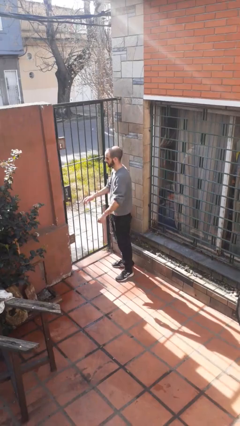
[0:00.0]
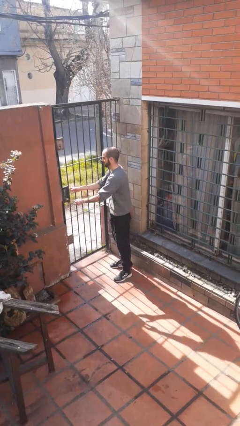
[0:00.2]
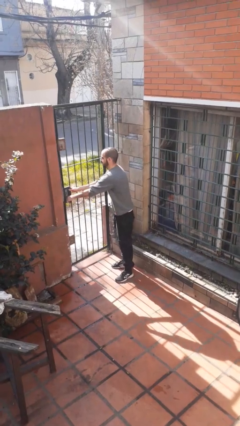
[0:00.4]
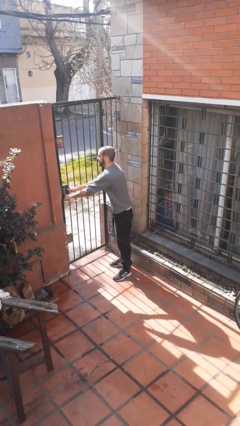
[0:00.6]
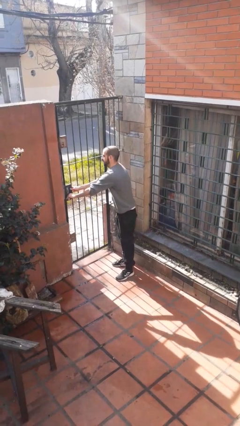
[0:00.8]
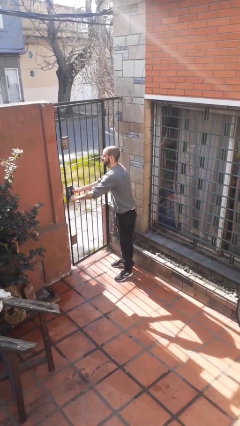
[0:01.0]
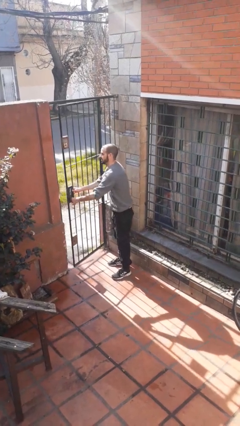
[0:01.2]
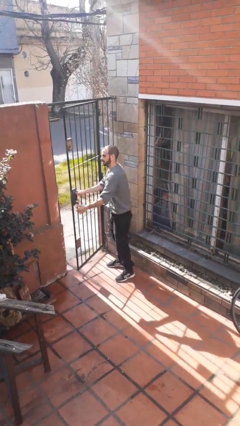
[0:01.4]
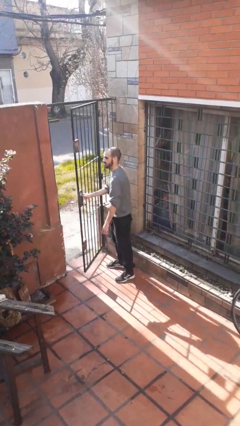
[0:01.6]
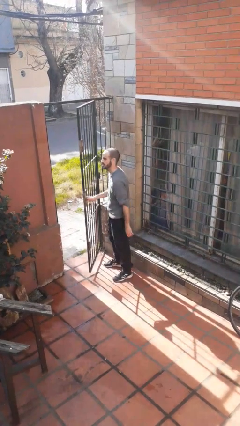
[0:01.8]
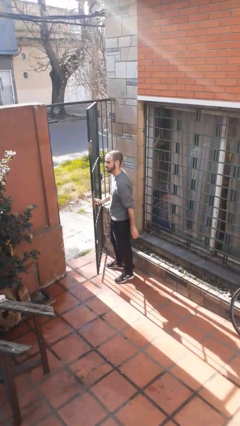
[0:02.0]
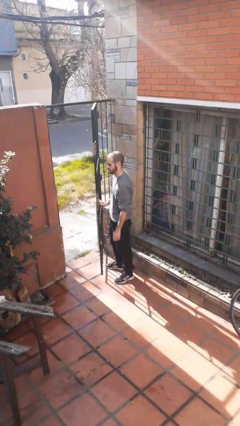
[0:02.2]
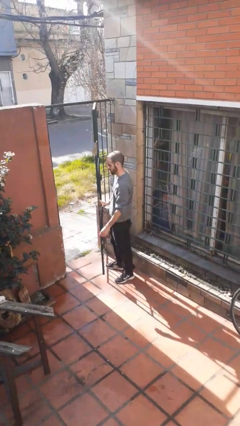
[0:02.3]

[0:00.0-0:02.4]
person opens gate

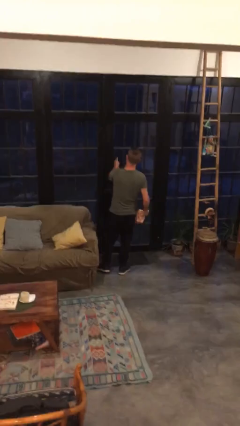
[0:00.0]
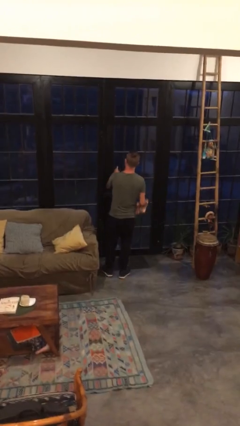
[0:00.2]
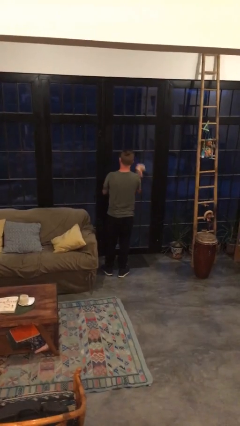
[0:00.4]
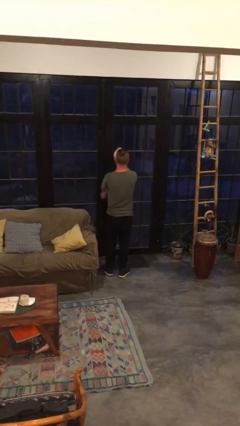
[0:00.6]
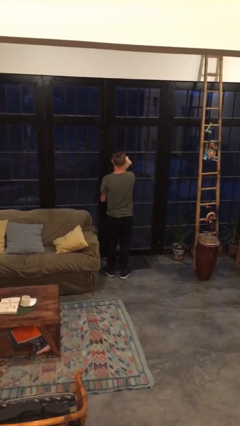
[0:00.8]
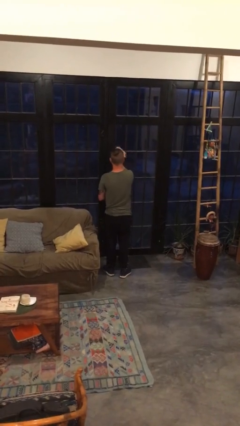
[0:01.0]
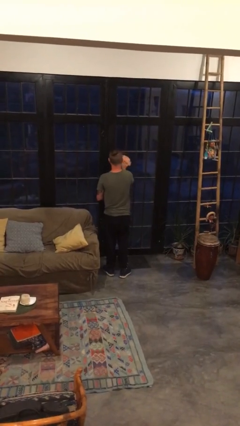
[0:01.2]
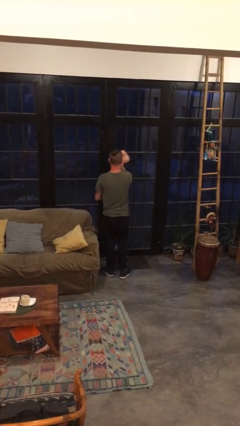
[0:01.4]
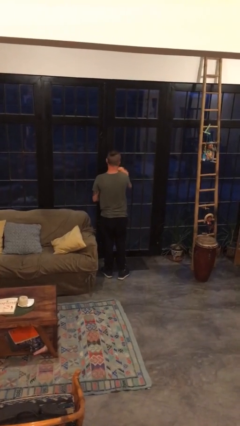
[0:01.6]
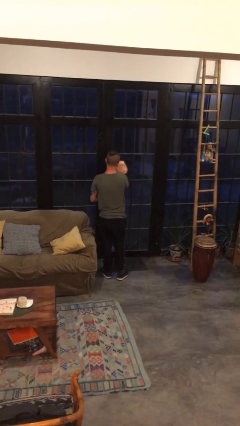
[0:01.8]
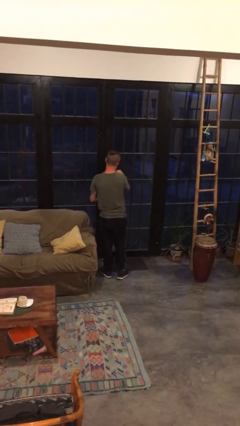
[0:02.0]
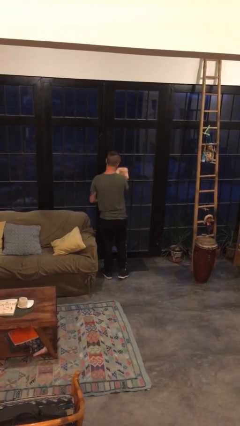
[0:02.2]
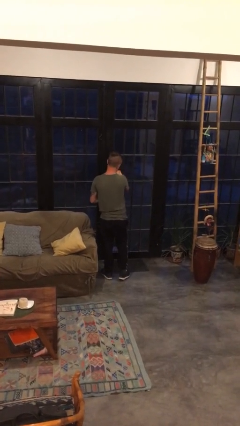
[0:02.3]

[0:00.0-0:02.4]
person washes window

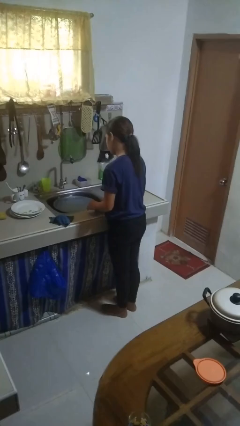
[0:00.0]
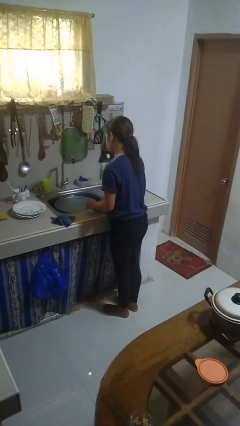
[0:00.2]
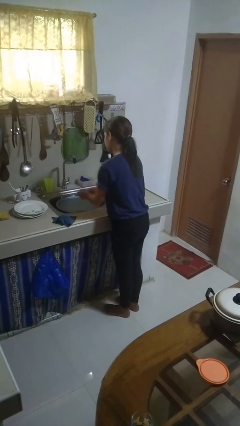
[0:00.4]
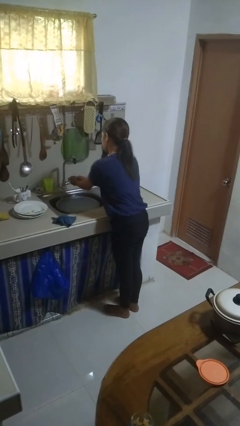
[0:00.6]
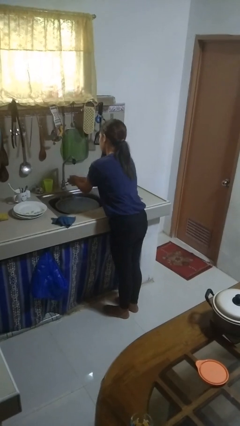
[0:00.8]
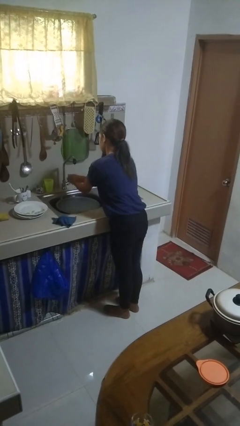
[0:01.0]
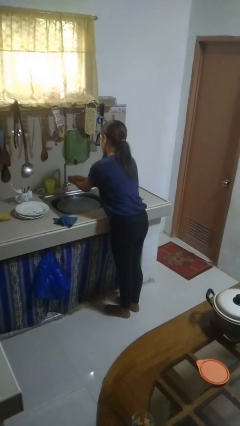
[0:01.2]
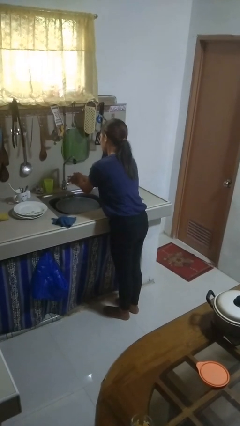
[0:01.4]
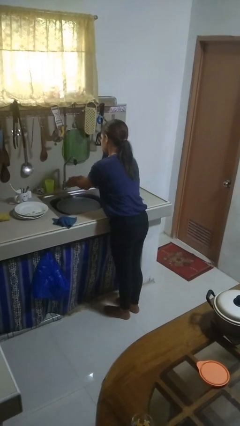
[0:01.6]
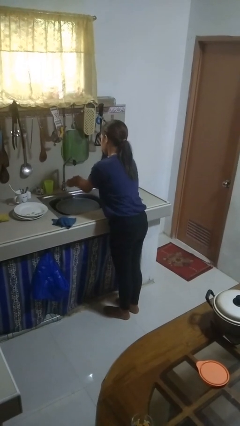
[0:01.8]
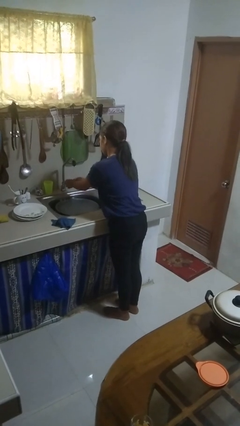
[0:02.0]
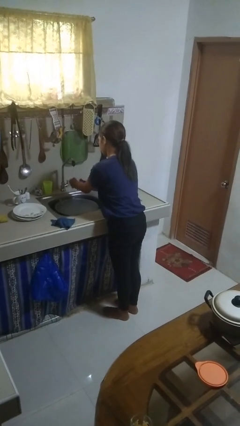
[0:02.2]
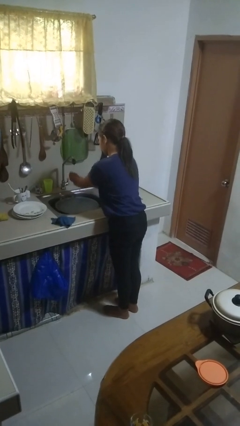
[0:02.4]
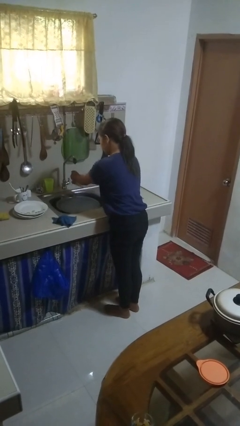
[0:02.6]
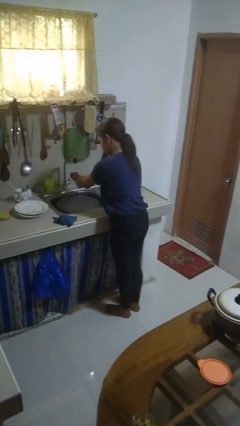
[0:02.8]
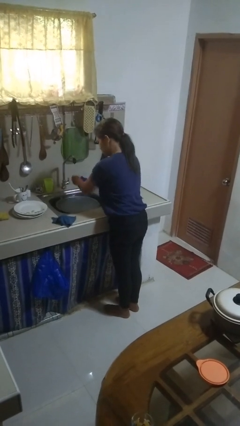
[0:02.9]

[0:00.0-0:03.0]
person washes hands

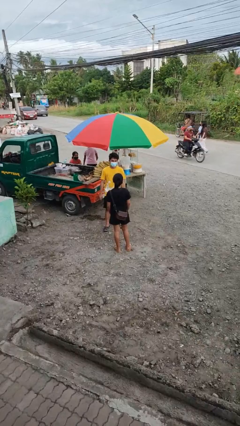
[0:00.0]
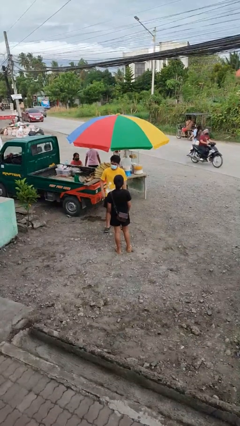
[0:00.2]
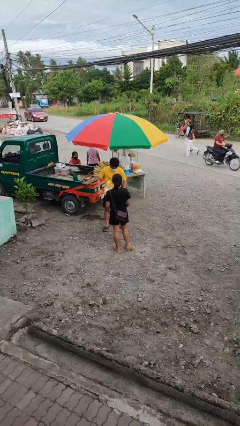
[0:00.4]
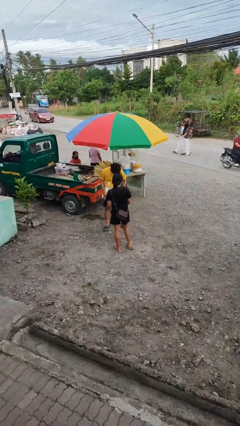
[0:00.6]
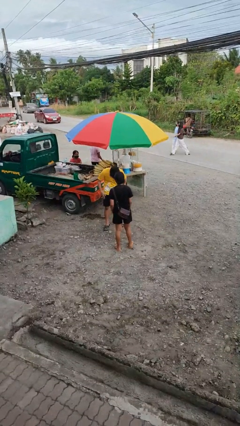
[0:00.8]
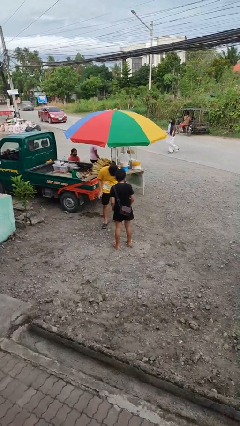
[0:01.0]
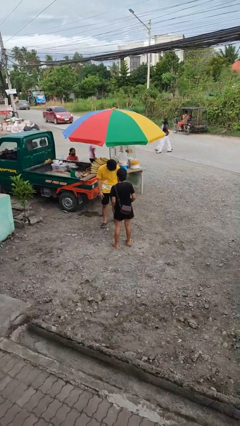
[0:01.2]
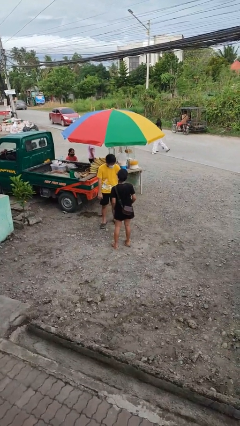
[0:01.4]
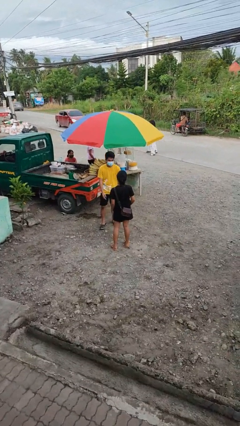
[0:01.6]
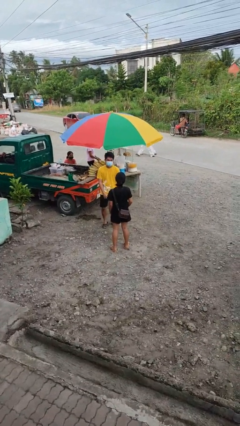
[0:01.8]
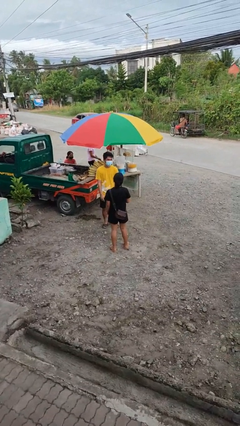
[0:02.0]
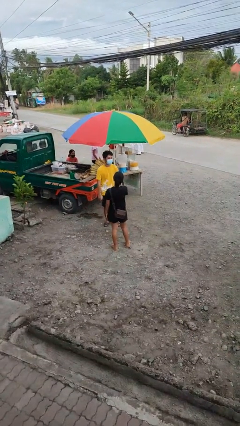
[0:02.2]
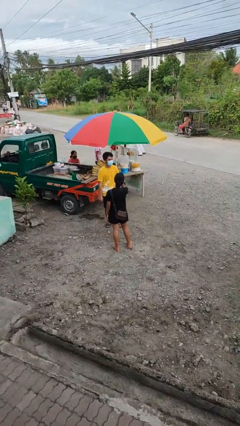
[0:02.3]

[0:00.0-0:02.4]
person laughs with person

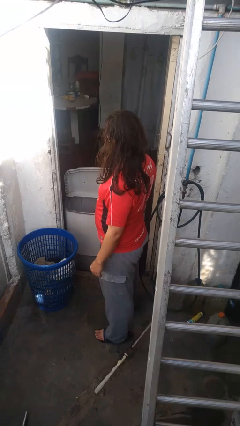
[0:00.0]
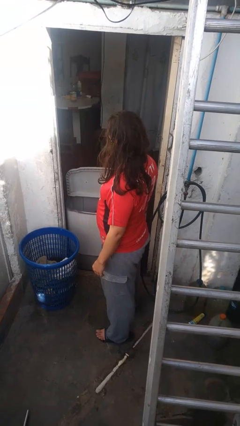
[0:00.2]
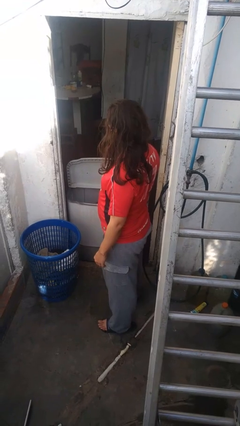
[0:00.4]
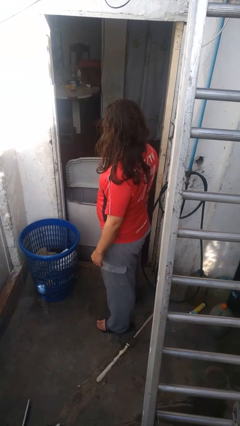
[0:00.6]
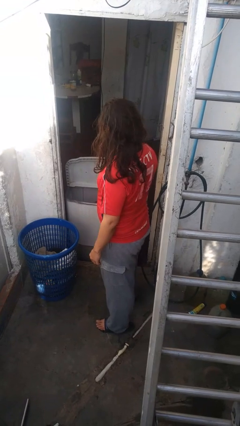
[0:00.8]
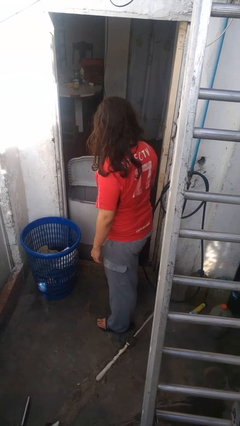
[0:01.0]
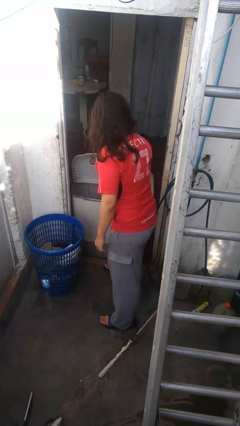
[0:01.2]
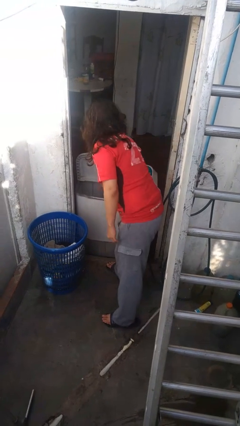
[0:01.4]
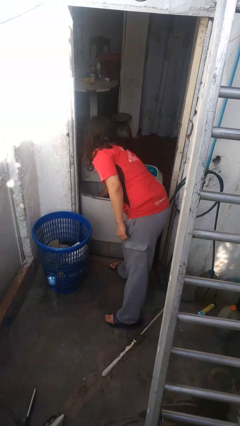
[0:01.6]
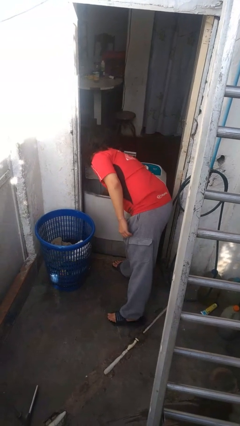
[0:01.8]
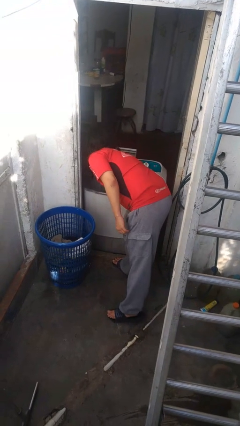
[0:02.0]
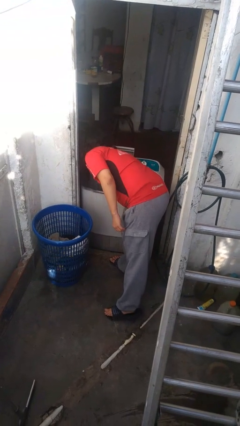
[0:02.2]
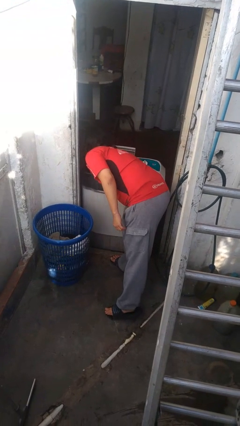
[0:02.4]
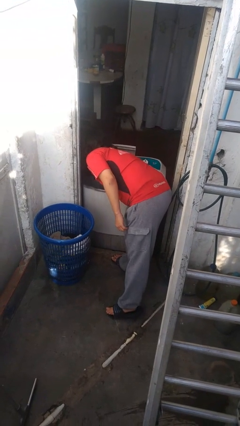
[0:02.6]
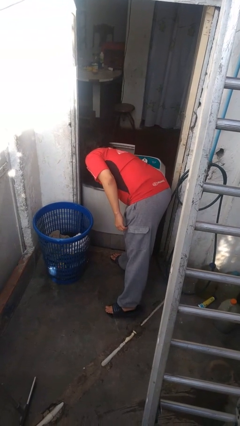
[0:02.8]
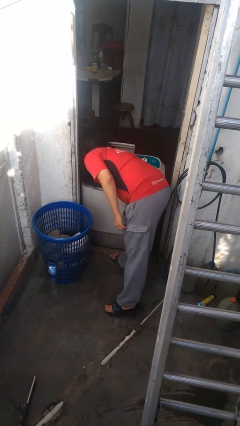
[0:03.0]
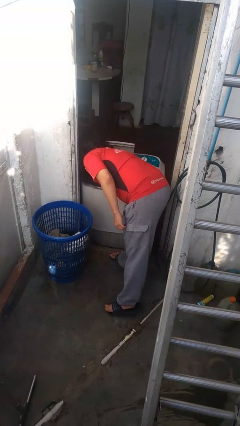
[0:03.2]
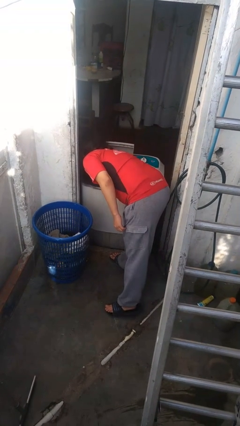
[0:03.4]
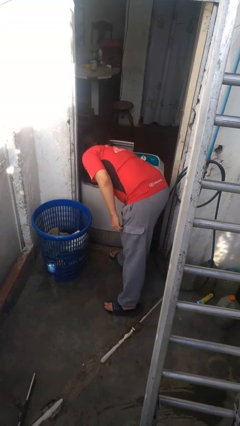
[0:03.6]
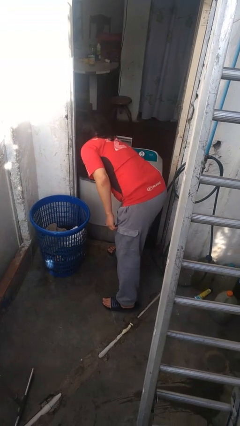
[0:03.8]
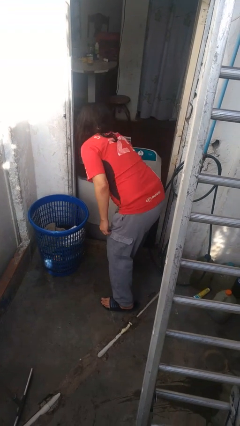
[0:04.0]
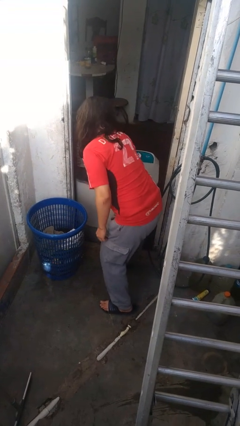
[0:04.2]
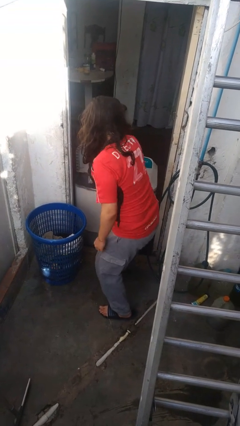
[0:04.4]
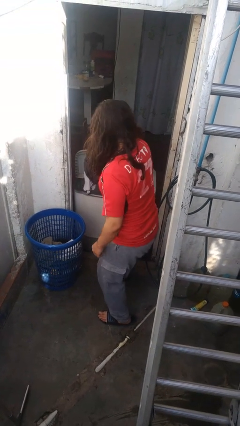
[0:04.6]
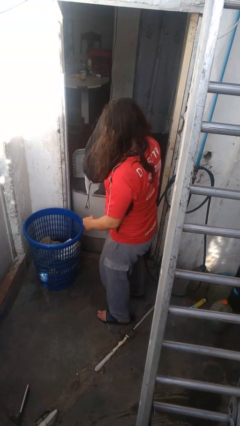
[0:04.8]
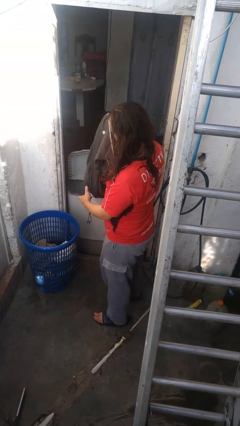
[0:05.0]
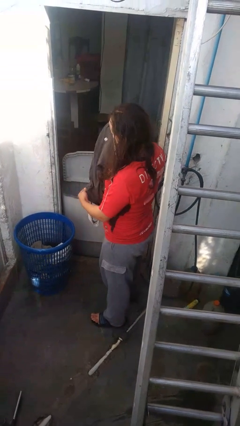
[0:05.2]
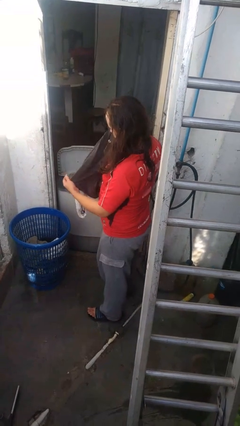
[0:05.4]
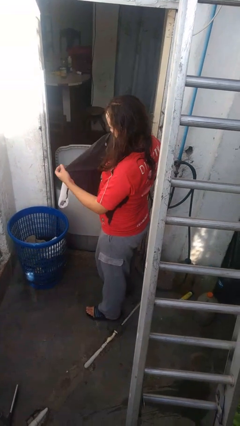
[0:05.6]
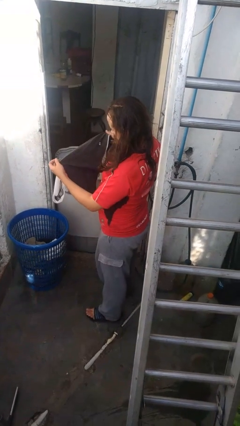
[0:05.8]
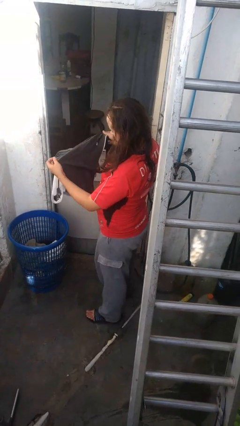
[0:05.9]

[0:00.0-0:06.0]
person unloads clotheswasher

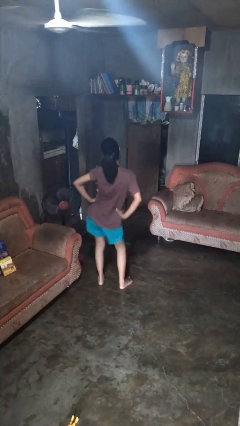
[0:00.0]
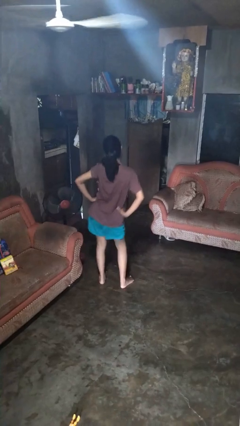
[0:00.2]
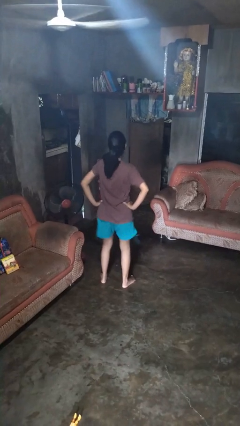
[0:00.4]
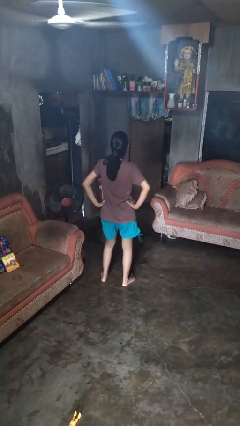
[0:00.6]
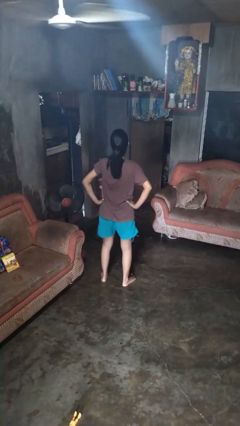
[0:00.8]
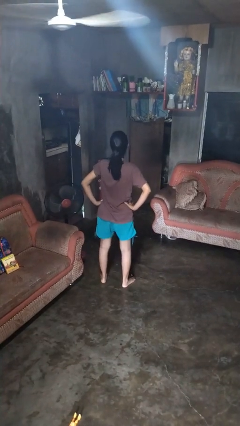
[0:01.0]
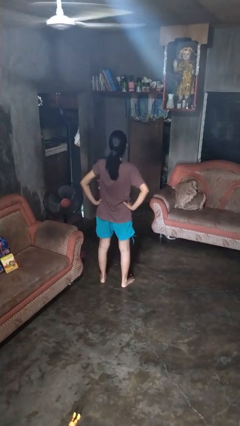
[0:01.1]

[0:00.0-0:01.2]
person dances in place
